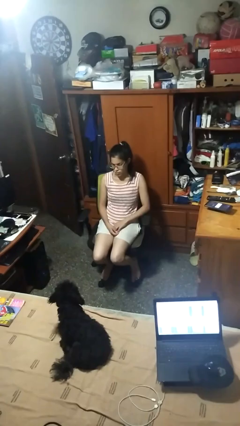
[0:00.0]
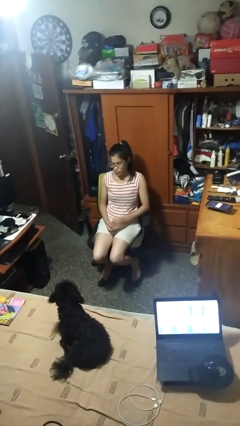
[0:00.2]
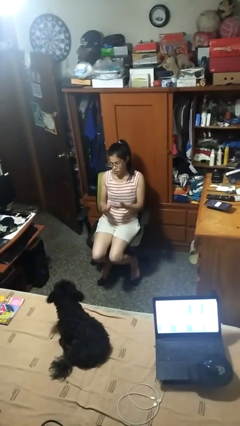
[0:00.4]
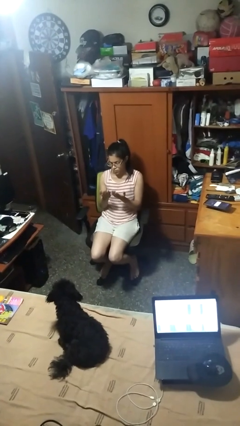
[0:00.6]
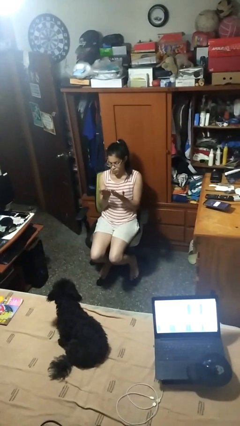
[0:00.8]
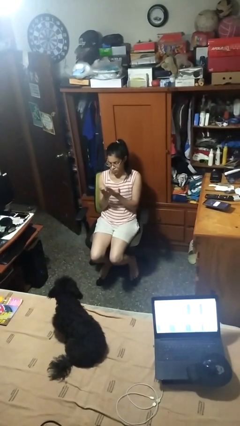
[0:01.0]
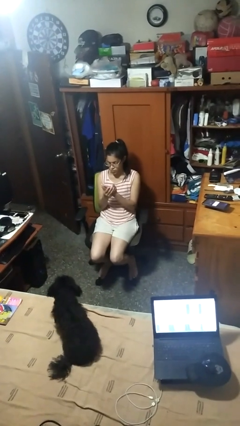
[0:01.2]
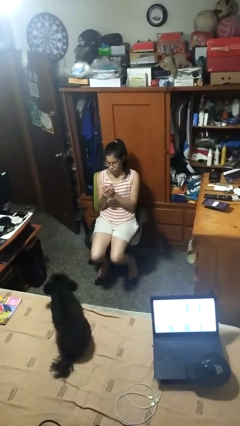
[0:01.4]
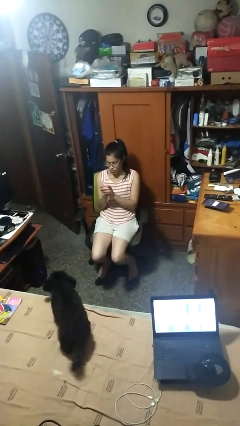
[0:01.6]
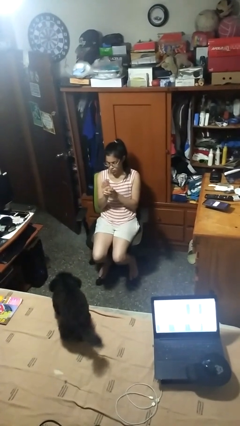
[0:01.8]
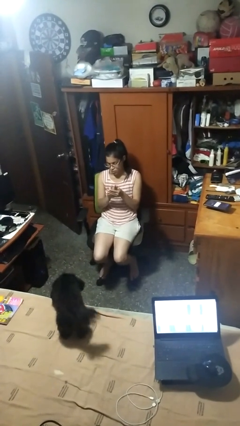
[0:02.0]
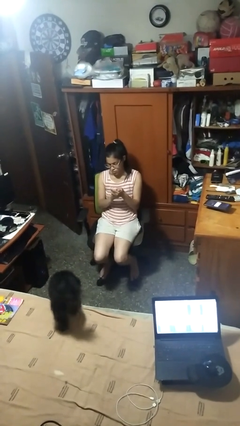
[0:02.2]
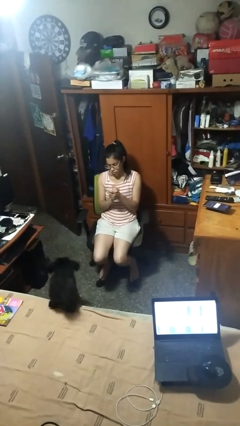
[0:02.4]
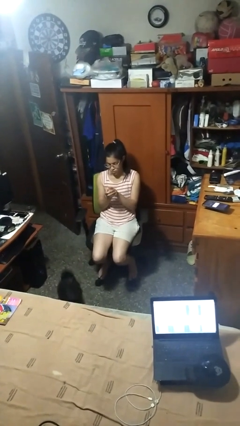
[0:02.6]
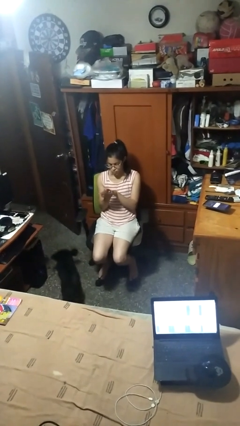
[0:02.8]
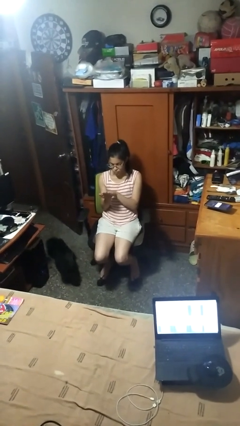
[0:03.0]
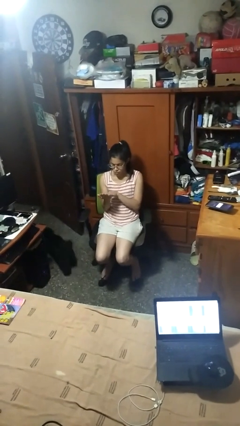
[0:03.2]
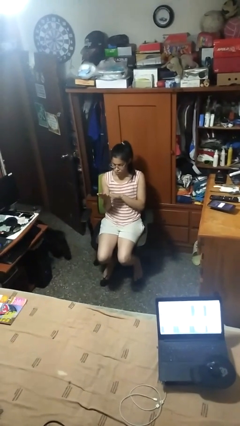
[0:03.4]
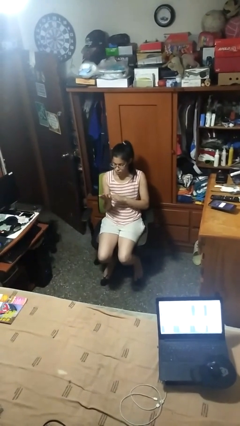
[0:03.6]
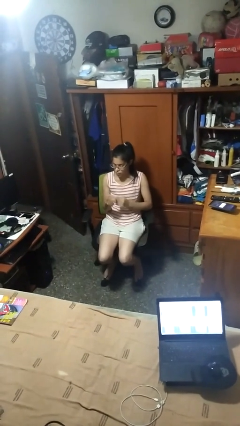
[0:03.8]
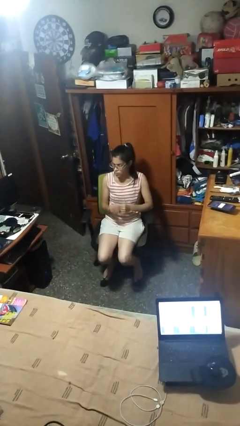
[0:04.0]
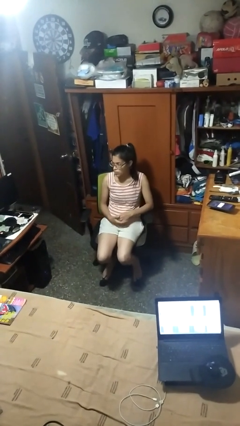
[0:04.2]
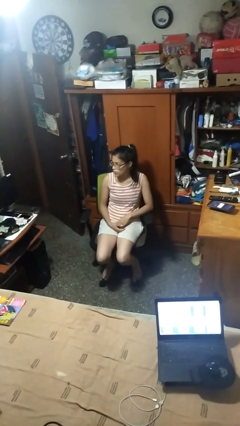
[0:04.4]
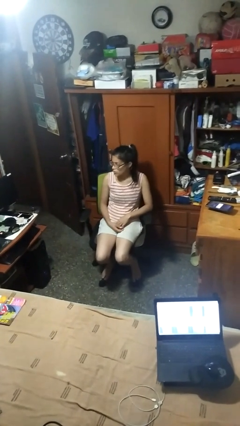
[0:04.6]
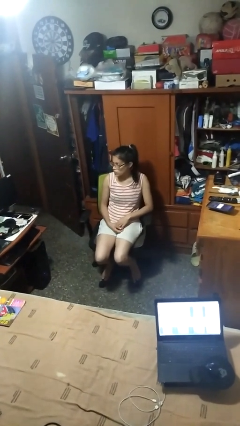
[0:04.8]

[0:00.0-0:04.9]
person looks at hands in lap

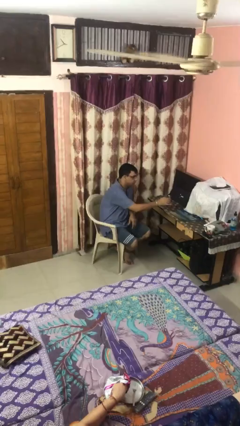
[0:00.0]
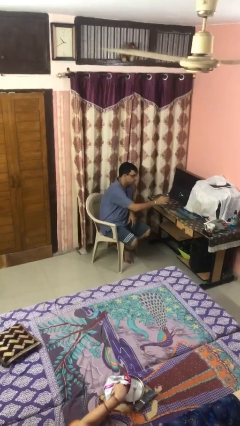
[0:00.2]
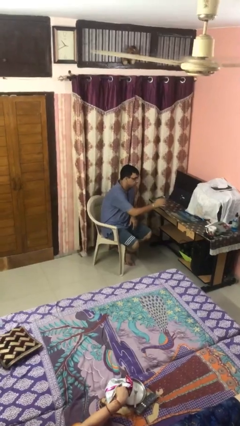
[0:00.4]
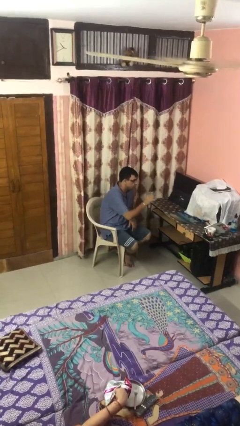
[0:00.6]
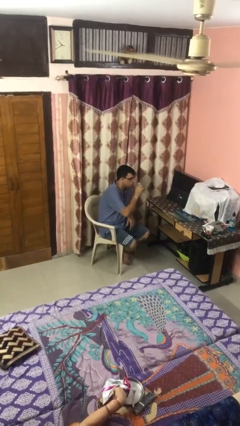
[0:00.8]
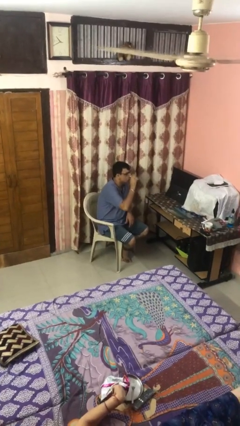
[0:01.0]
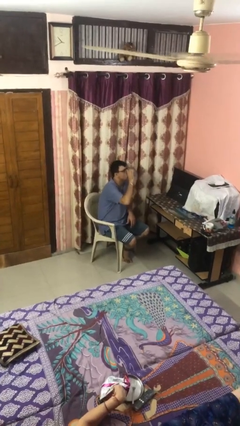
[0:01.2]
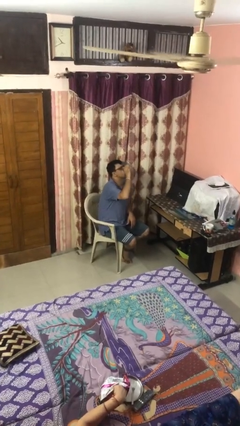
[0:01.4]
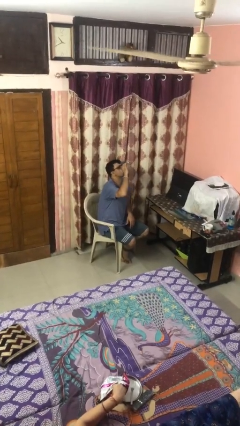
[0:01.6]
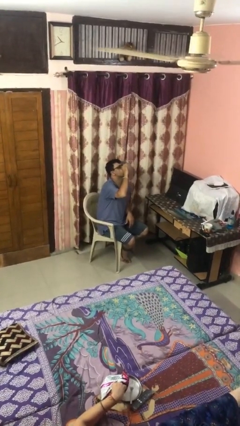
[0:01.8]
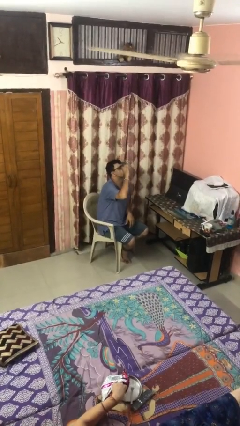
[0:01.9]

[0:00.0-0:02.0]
person drinks from shotglass

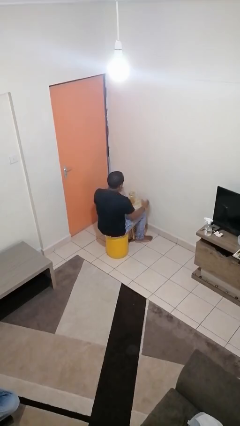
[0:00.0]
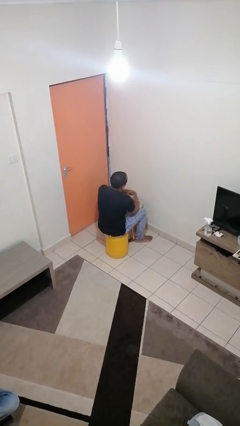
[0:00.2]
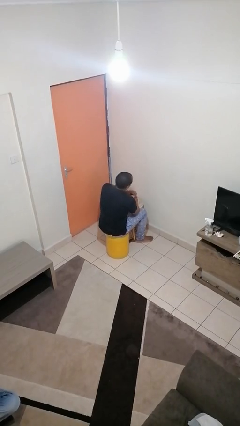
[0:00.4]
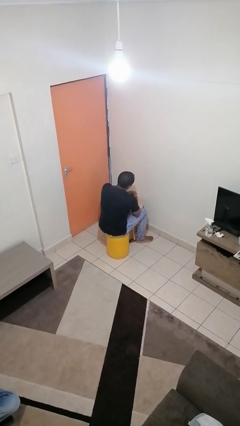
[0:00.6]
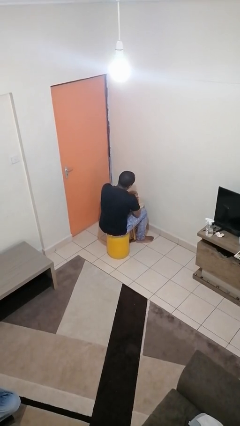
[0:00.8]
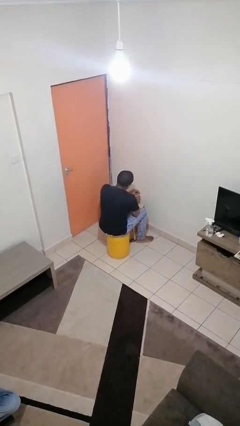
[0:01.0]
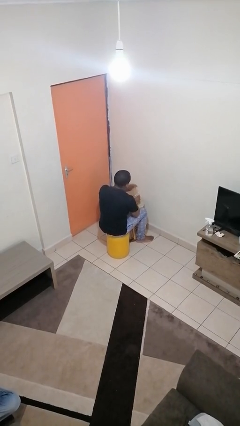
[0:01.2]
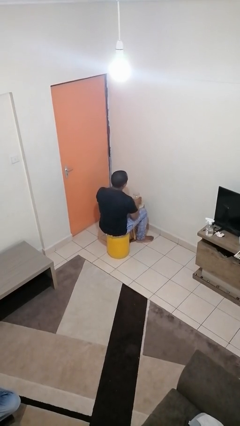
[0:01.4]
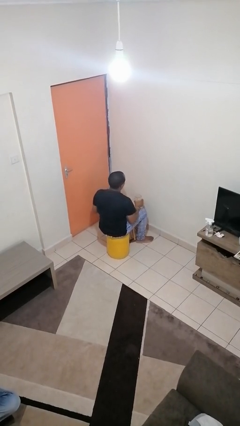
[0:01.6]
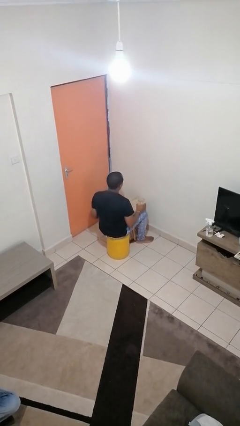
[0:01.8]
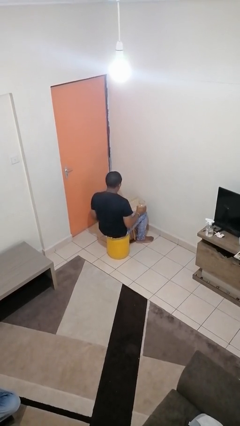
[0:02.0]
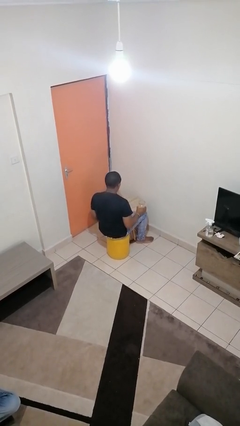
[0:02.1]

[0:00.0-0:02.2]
person opens jar

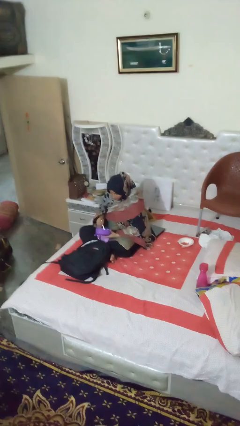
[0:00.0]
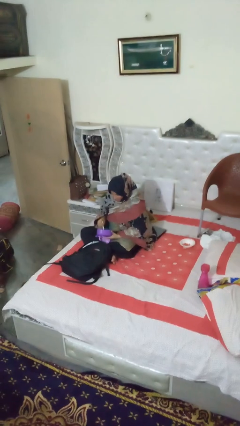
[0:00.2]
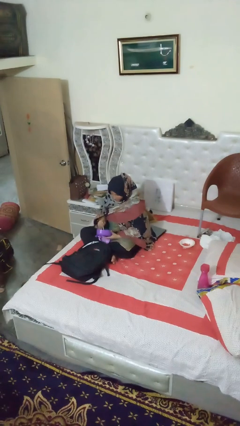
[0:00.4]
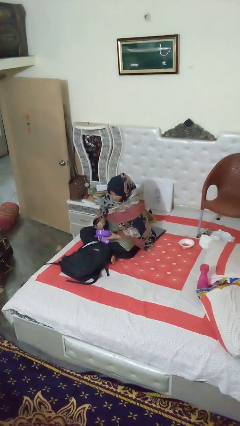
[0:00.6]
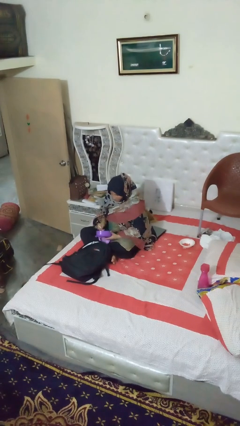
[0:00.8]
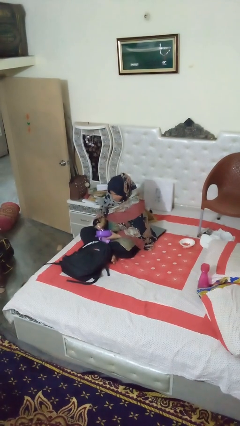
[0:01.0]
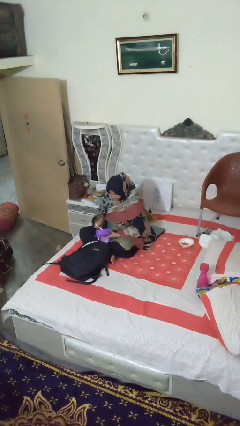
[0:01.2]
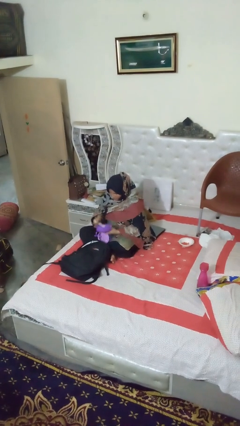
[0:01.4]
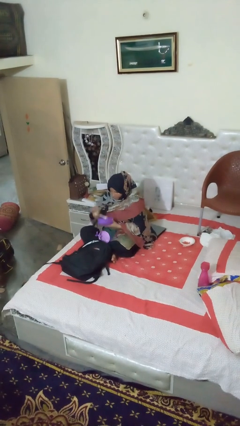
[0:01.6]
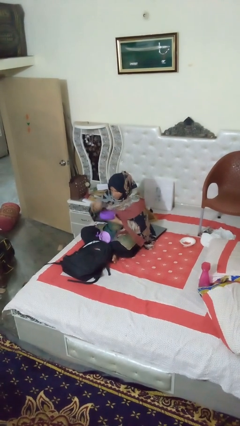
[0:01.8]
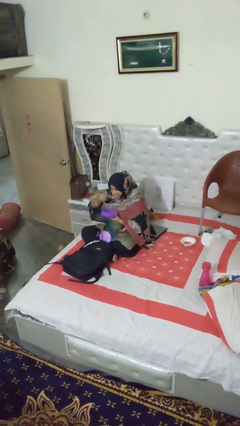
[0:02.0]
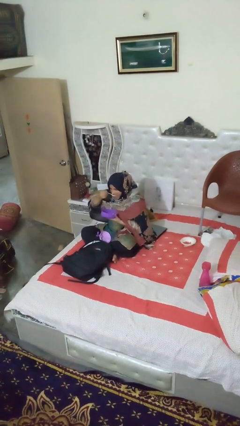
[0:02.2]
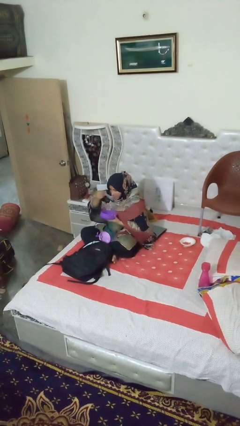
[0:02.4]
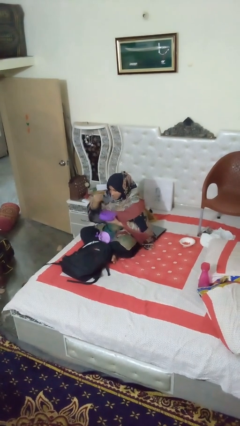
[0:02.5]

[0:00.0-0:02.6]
person eats snack from bag

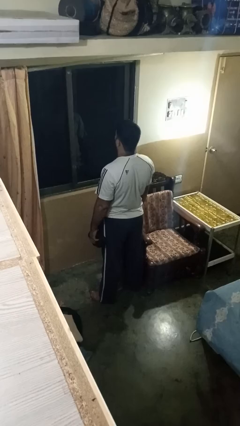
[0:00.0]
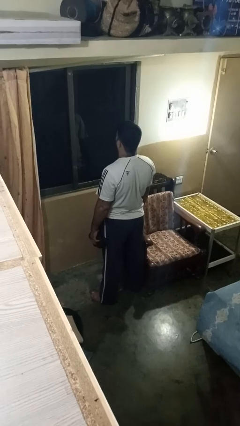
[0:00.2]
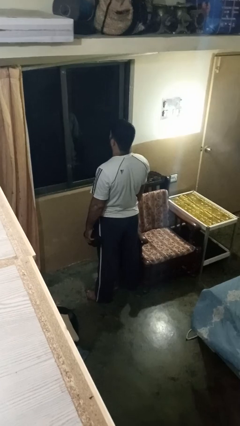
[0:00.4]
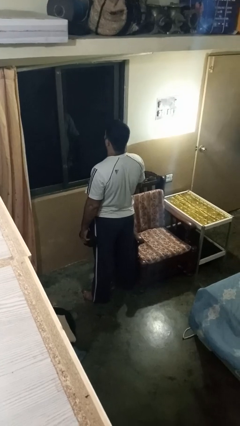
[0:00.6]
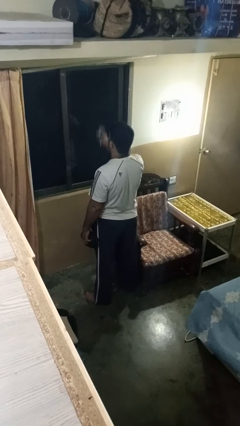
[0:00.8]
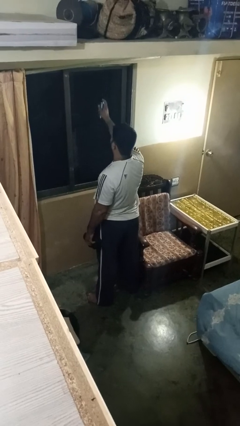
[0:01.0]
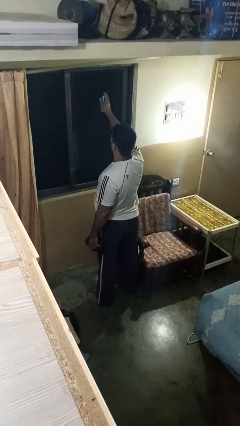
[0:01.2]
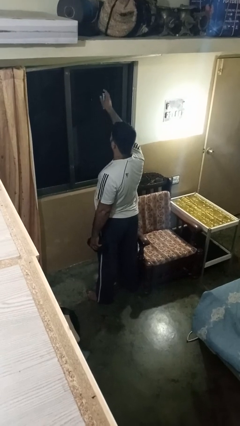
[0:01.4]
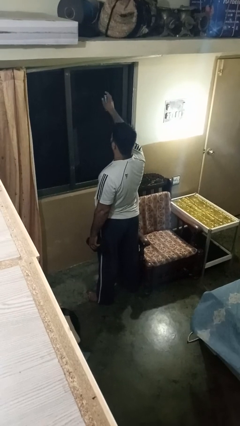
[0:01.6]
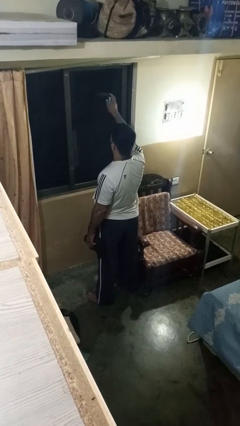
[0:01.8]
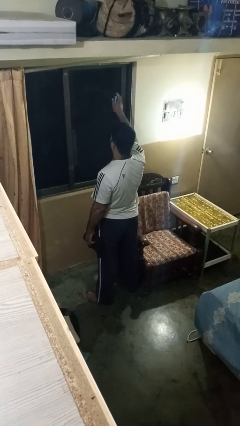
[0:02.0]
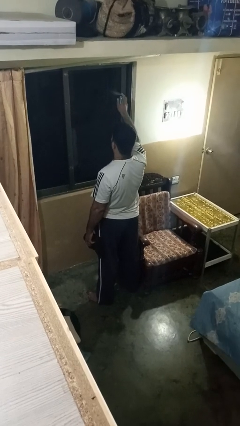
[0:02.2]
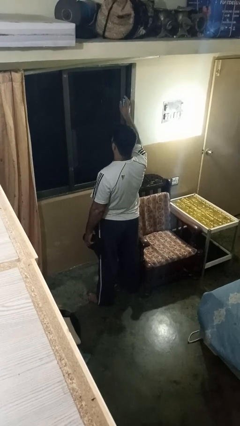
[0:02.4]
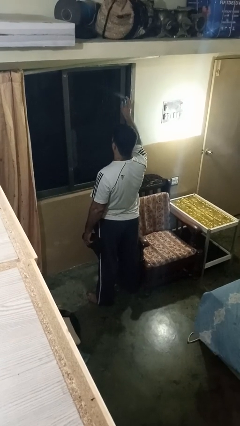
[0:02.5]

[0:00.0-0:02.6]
person sprays from bottle

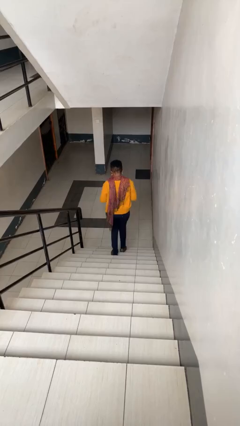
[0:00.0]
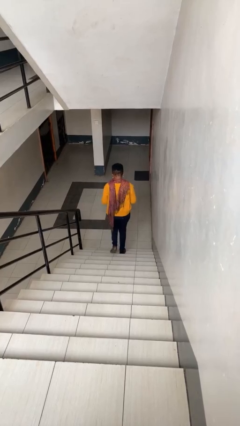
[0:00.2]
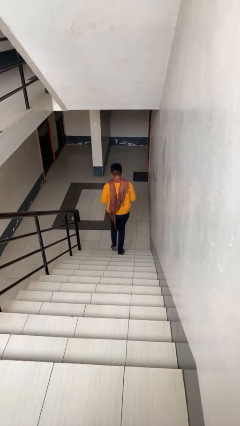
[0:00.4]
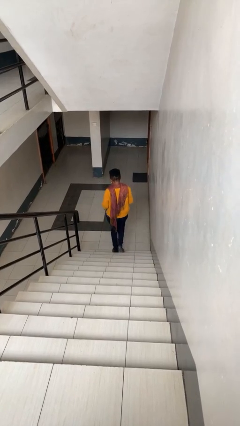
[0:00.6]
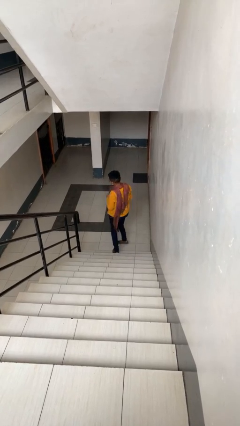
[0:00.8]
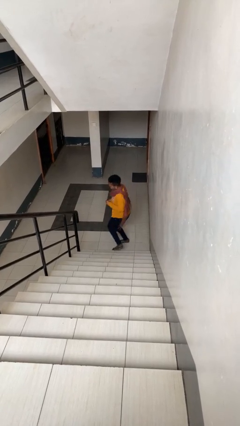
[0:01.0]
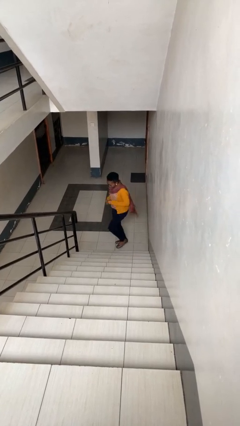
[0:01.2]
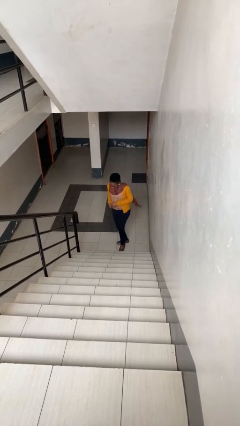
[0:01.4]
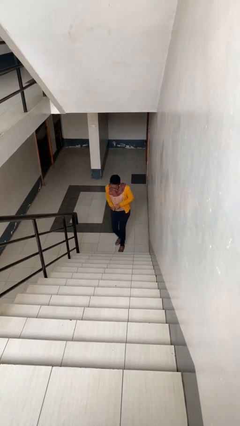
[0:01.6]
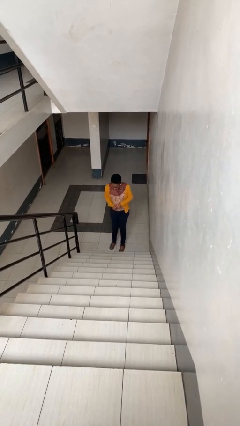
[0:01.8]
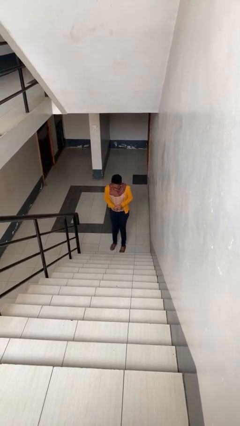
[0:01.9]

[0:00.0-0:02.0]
person climbs down stairs

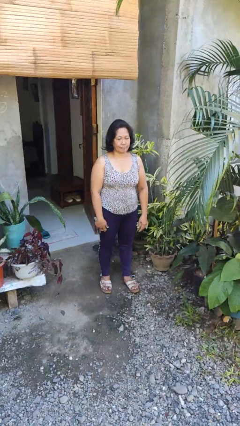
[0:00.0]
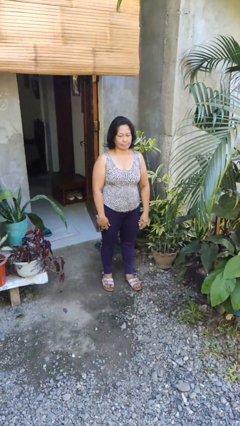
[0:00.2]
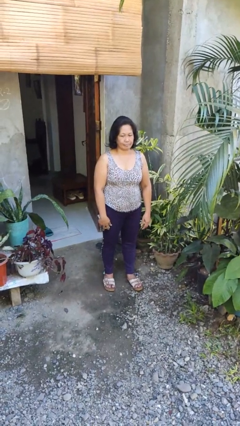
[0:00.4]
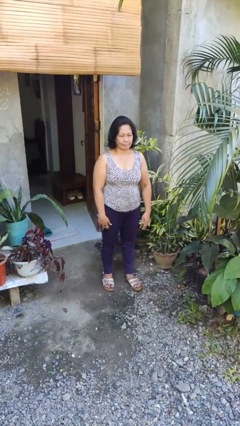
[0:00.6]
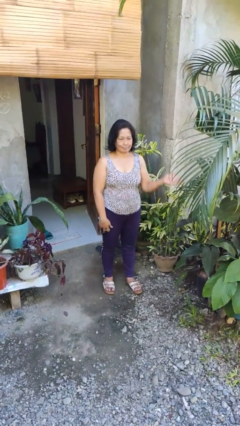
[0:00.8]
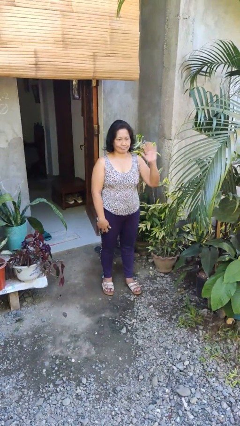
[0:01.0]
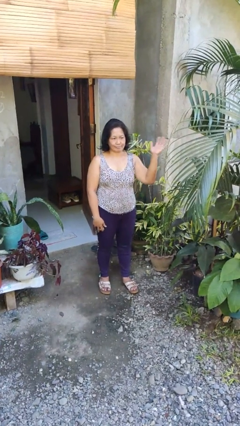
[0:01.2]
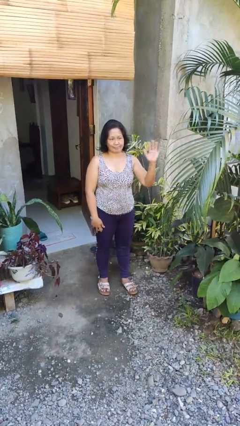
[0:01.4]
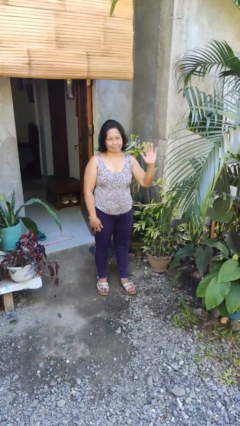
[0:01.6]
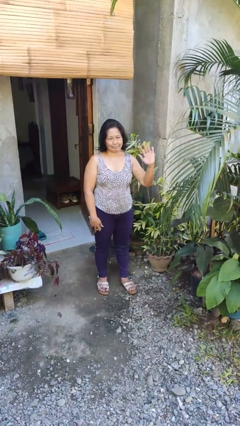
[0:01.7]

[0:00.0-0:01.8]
person waves at person
